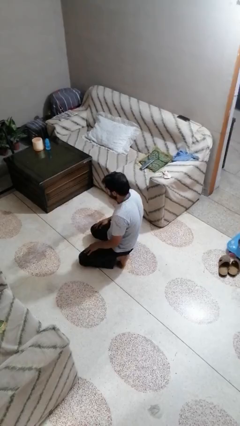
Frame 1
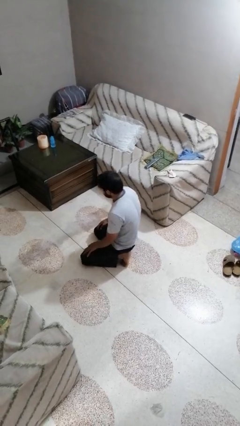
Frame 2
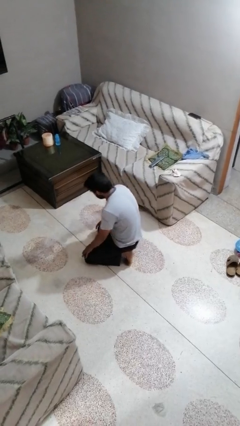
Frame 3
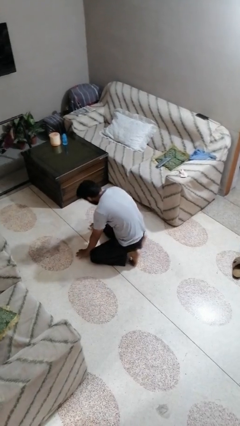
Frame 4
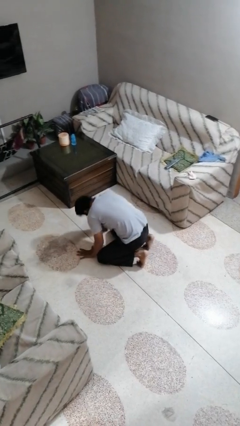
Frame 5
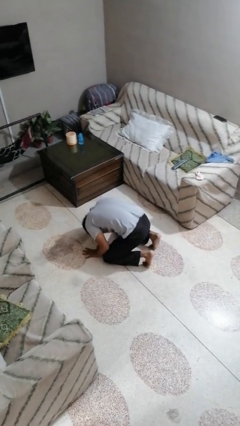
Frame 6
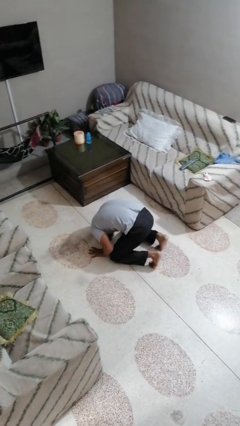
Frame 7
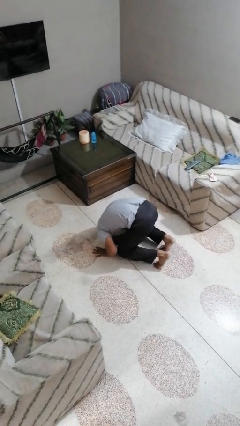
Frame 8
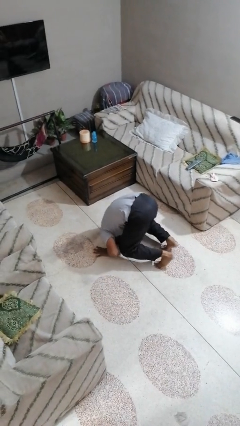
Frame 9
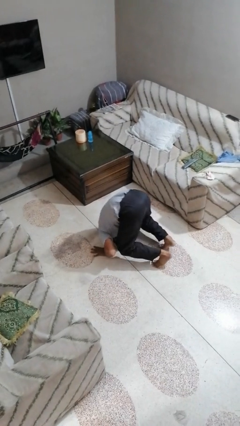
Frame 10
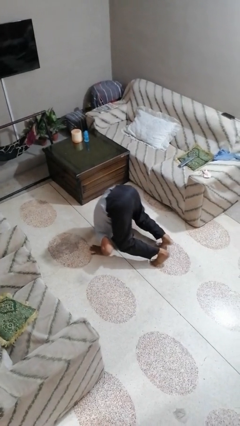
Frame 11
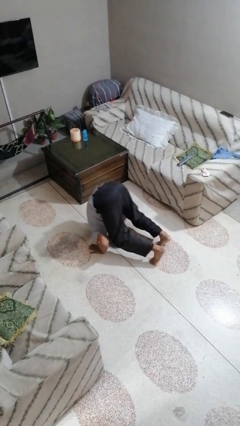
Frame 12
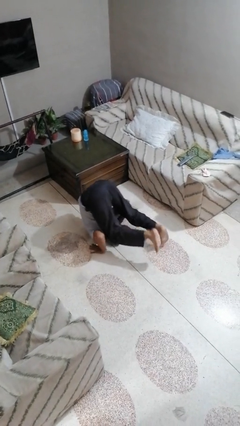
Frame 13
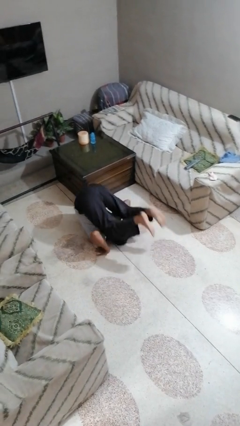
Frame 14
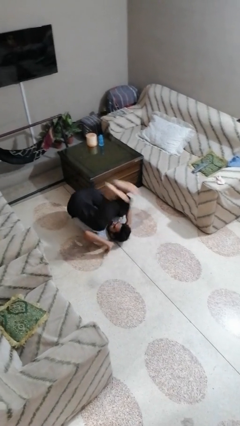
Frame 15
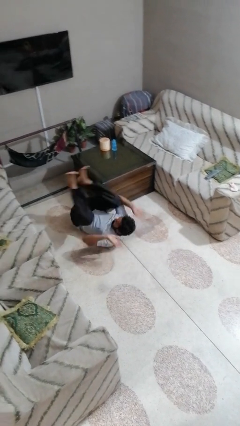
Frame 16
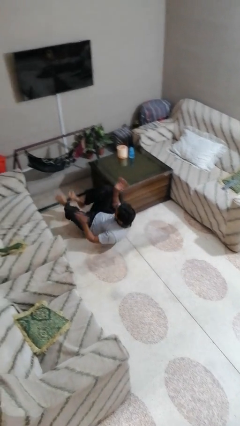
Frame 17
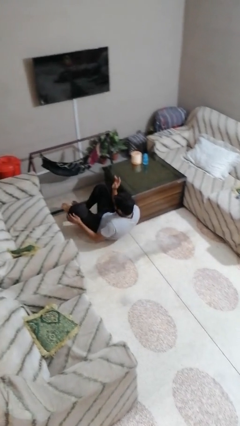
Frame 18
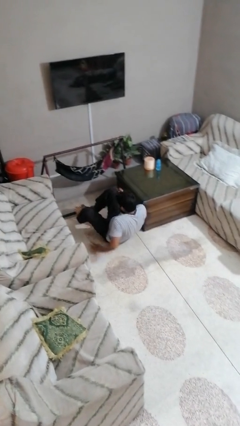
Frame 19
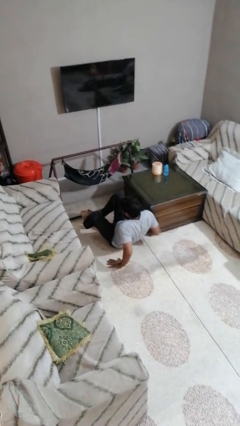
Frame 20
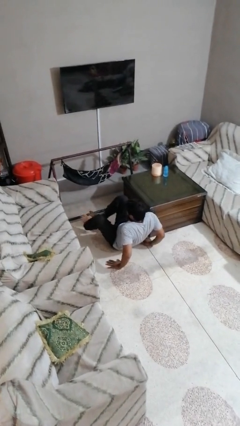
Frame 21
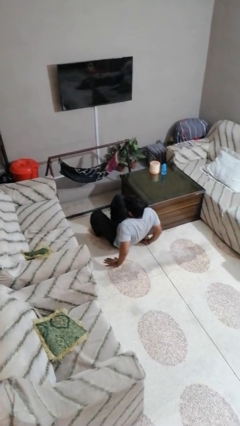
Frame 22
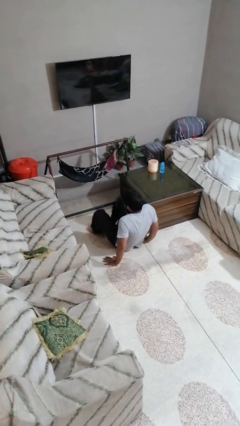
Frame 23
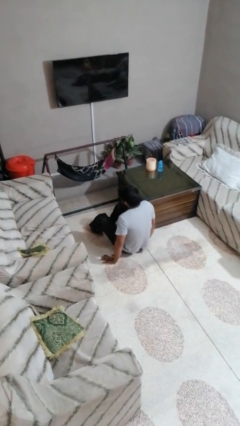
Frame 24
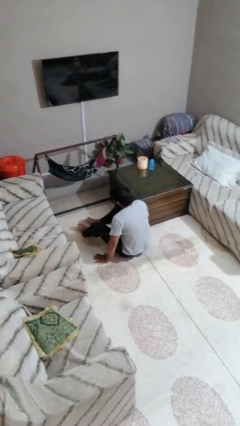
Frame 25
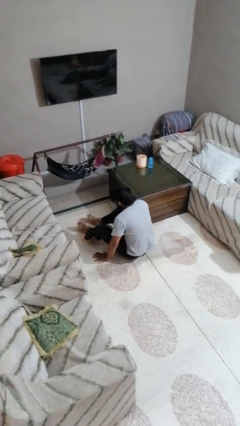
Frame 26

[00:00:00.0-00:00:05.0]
person somersaults

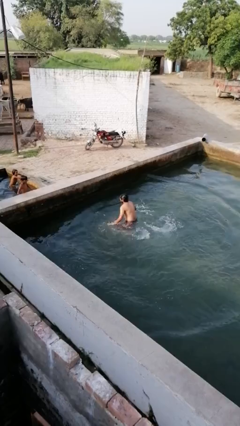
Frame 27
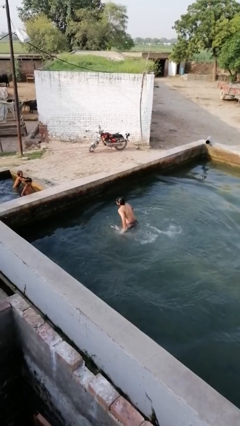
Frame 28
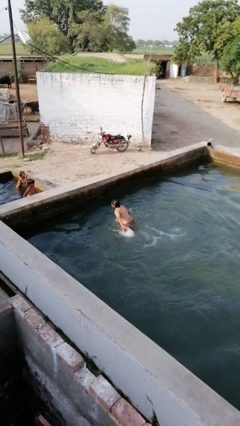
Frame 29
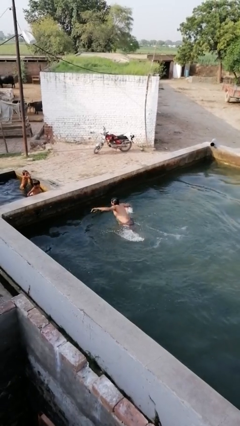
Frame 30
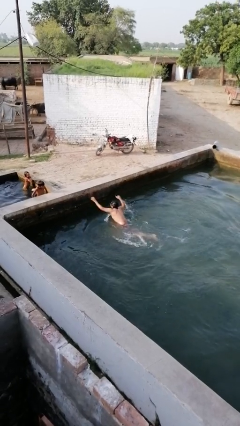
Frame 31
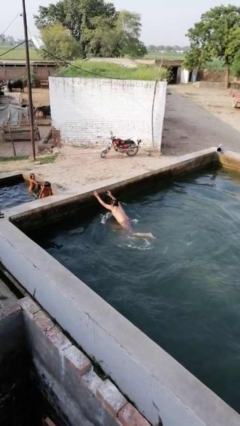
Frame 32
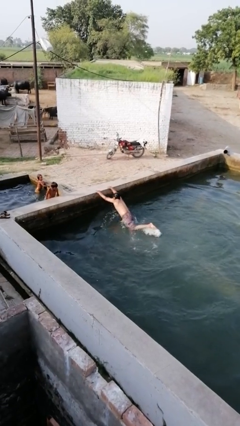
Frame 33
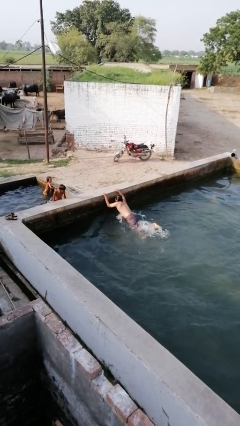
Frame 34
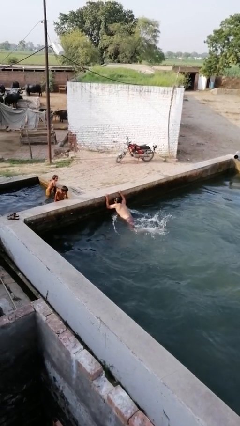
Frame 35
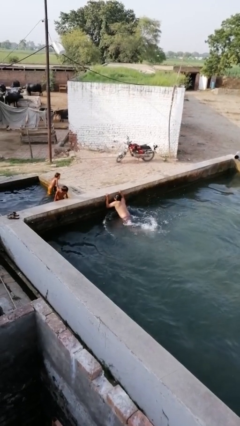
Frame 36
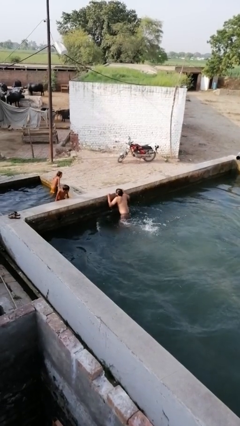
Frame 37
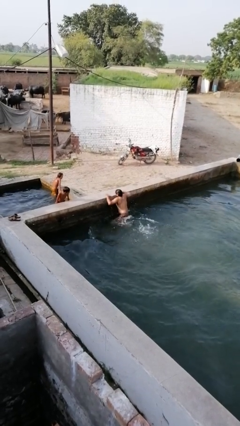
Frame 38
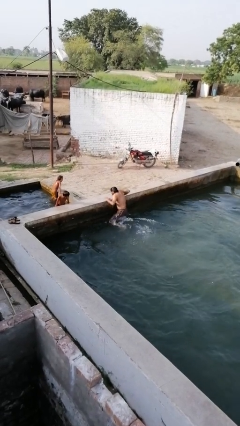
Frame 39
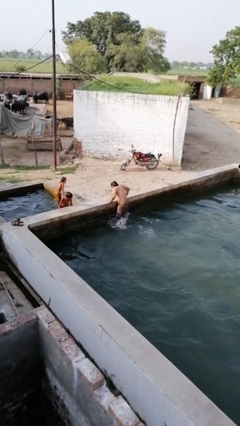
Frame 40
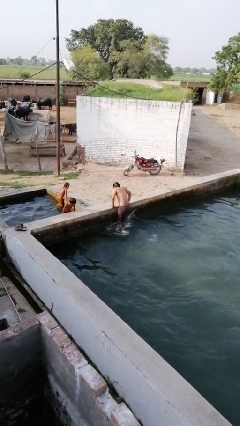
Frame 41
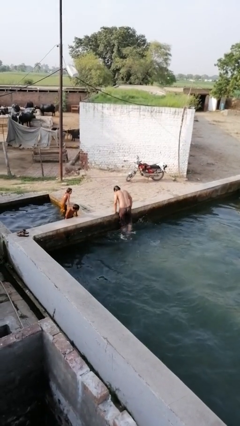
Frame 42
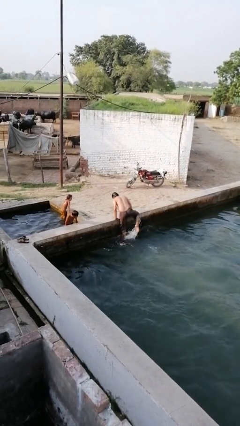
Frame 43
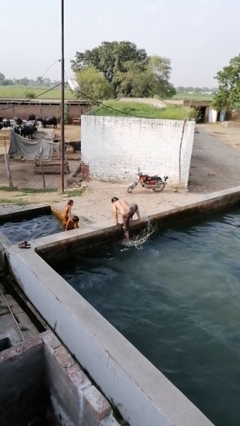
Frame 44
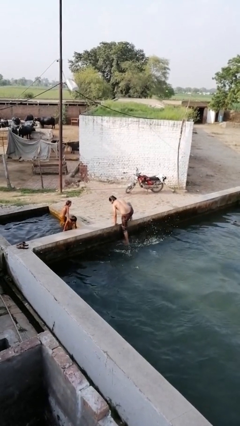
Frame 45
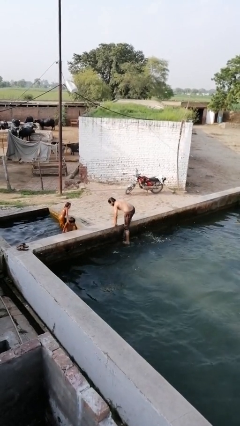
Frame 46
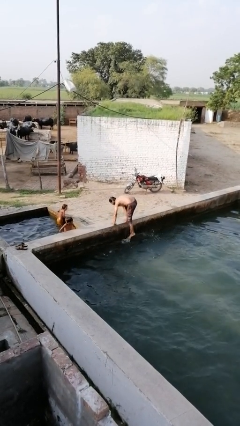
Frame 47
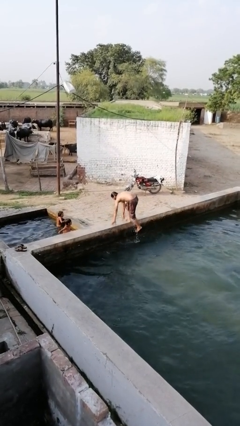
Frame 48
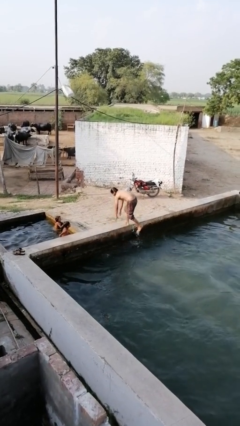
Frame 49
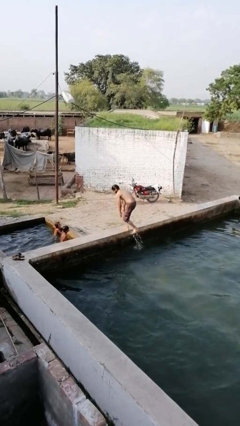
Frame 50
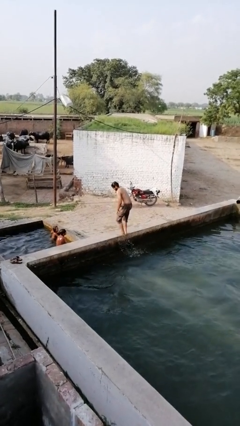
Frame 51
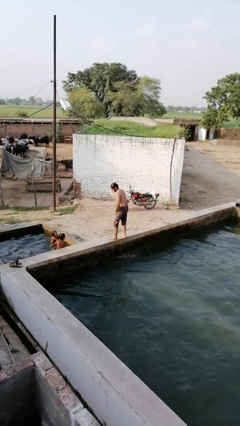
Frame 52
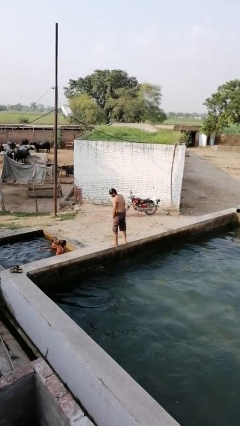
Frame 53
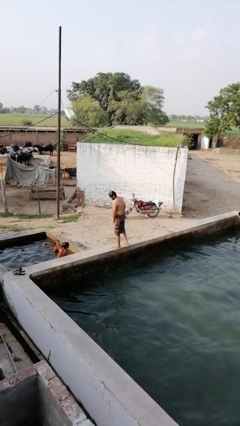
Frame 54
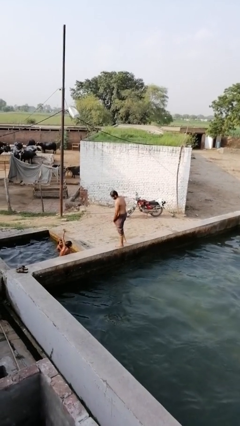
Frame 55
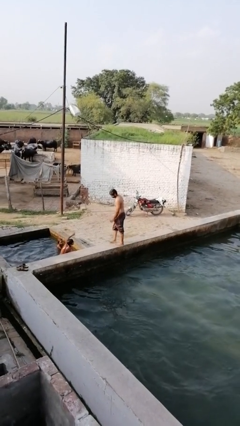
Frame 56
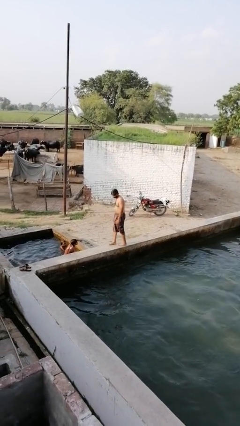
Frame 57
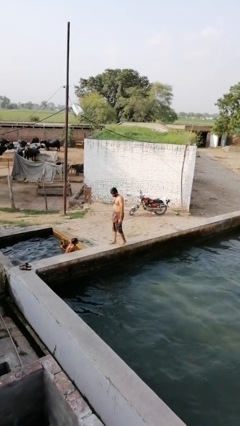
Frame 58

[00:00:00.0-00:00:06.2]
person exits pool

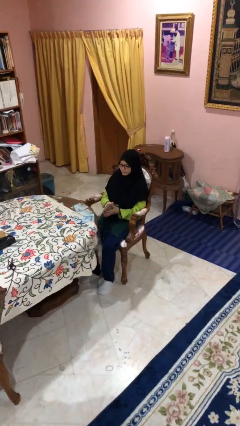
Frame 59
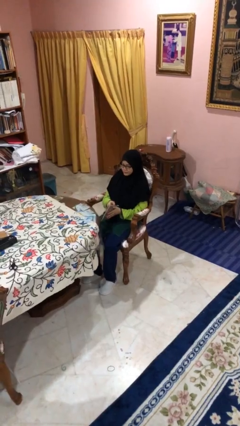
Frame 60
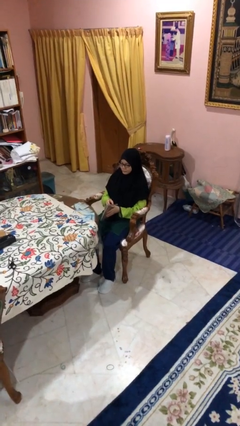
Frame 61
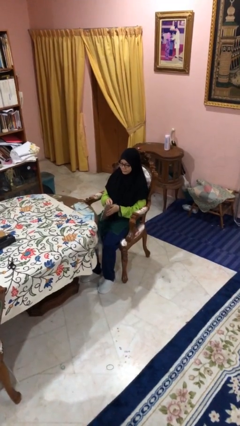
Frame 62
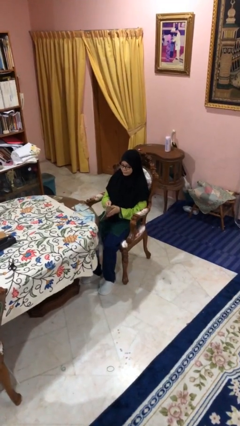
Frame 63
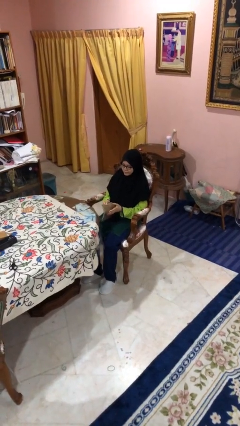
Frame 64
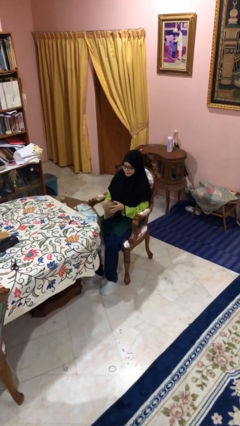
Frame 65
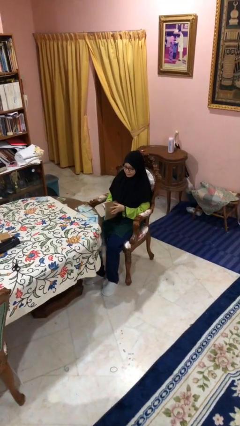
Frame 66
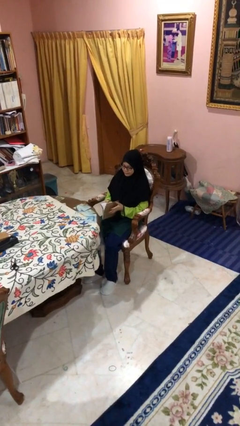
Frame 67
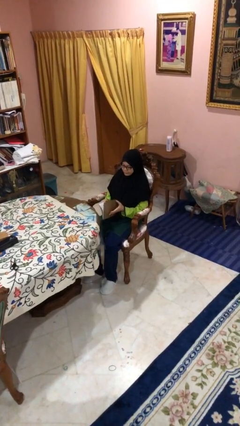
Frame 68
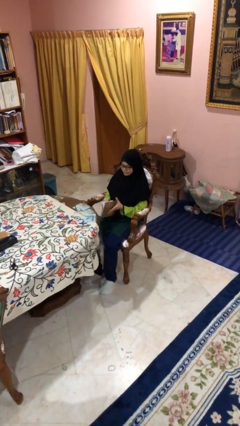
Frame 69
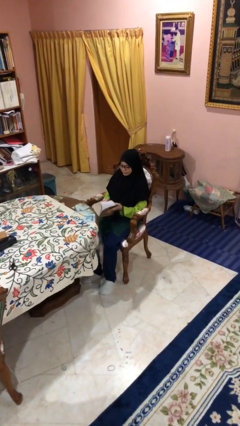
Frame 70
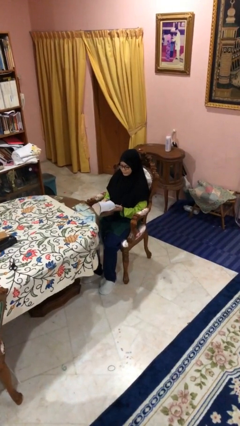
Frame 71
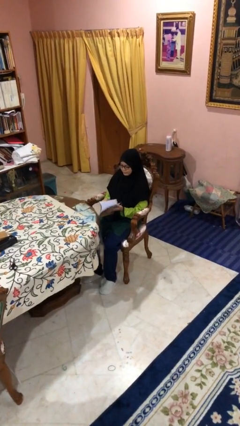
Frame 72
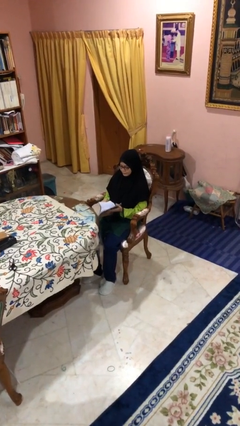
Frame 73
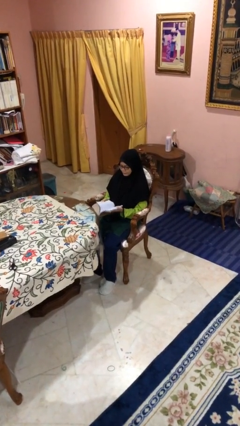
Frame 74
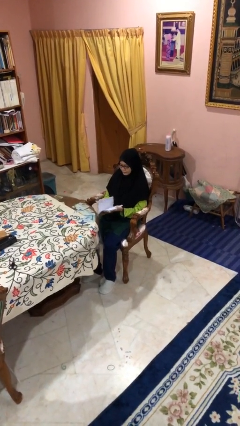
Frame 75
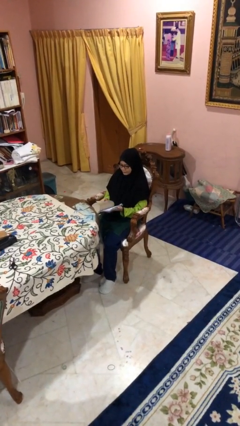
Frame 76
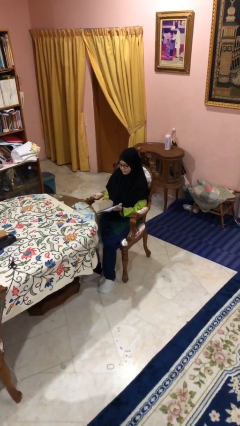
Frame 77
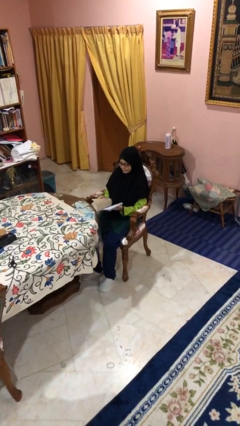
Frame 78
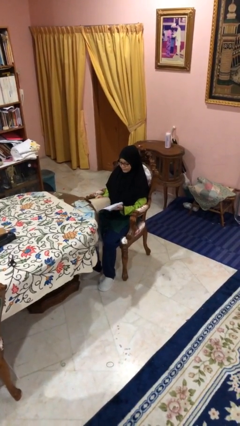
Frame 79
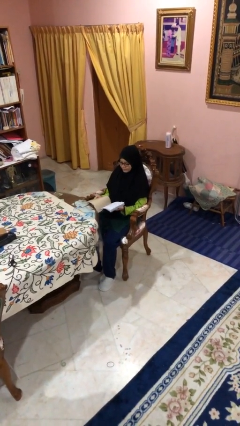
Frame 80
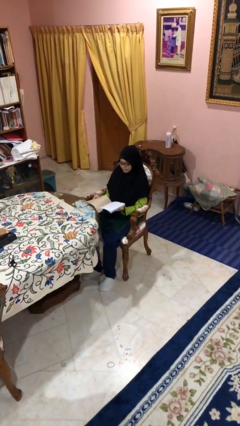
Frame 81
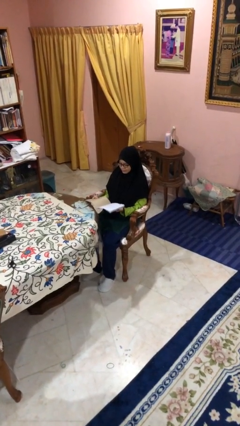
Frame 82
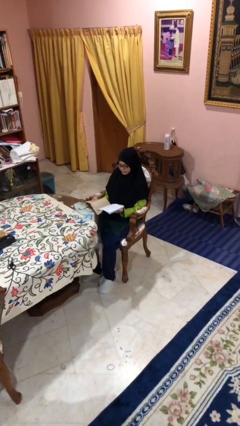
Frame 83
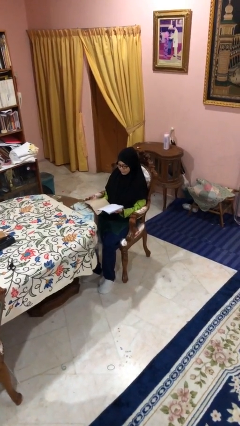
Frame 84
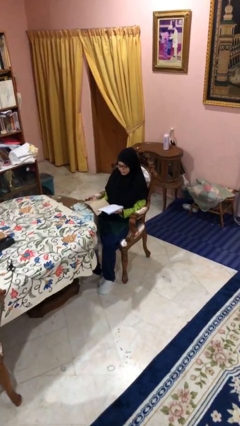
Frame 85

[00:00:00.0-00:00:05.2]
person reads document

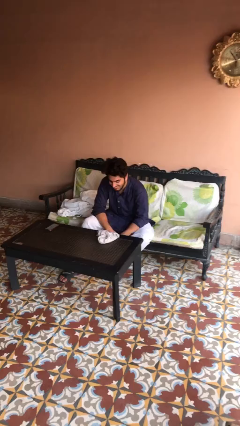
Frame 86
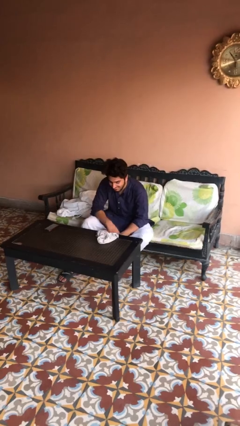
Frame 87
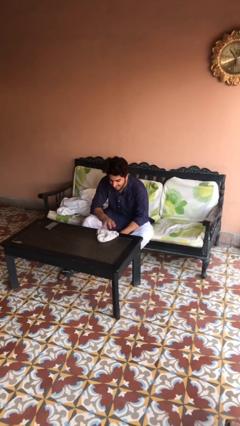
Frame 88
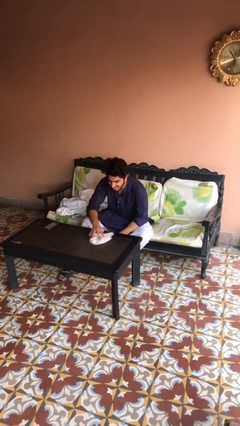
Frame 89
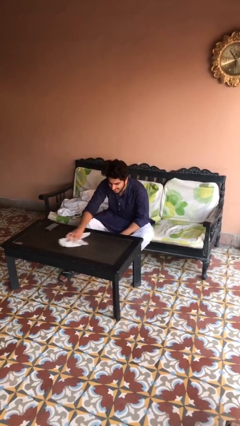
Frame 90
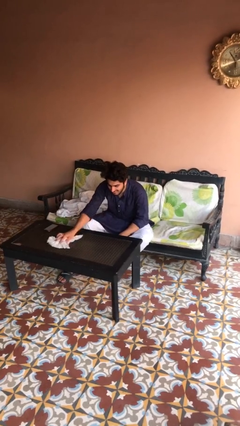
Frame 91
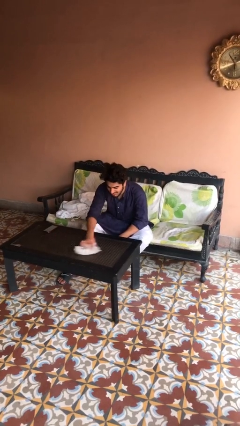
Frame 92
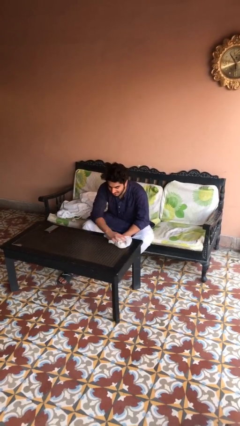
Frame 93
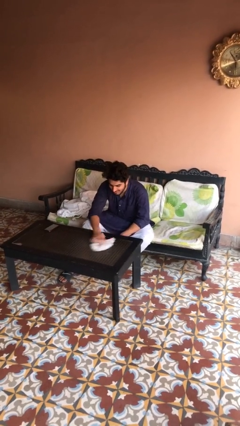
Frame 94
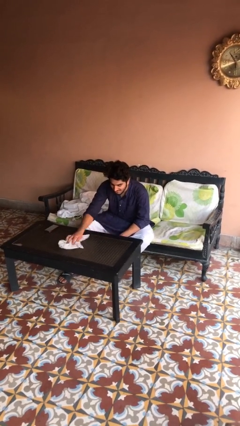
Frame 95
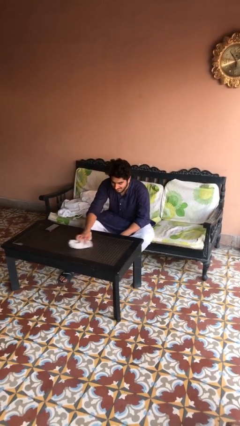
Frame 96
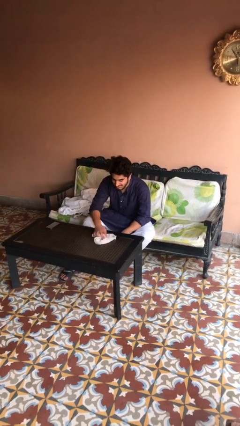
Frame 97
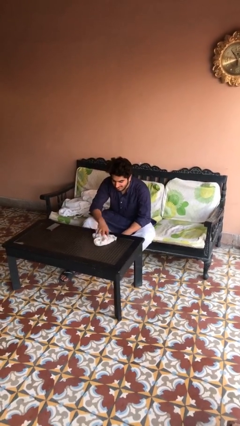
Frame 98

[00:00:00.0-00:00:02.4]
person cleans table with rag
